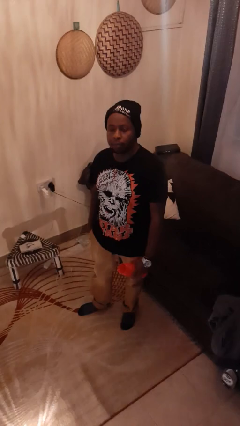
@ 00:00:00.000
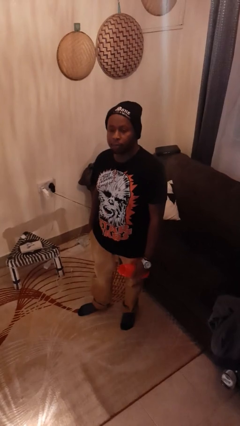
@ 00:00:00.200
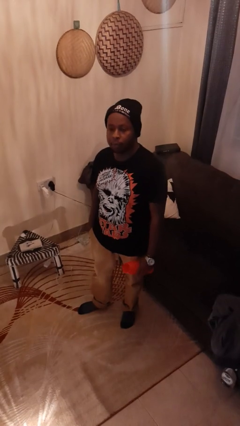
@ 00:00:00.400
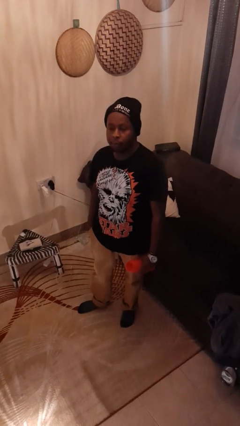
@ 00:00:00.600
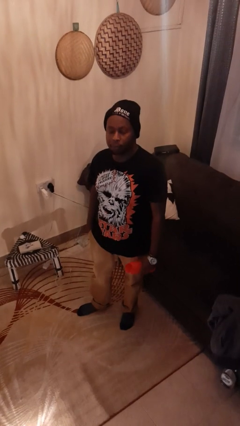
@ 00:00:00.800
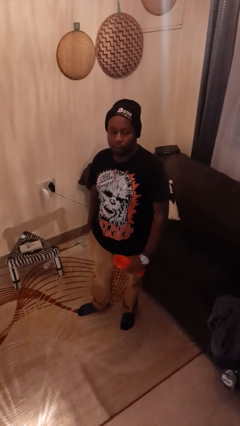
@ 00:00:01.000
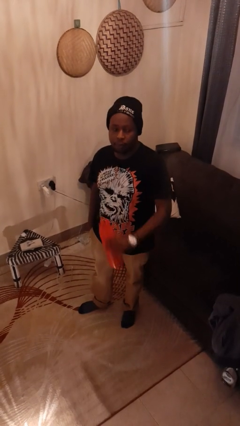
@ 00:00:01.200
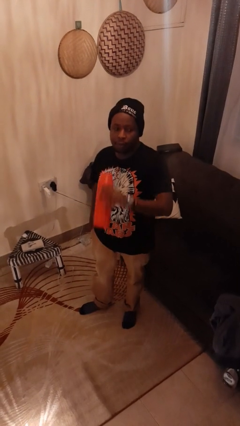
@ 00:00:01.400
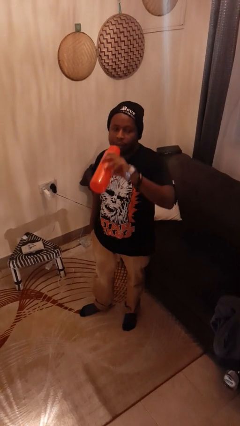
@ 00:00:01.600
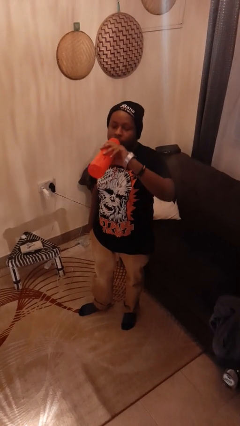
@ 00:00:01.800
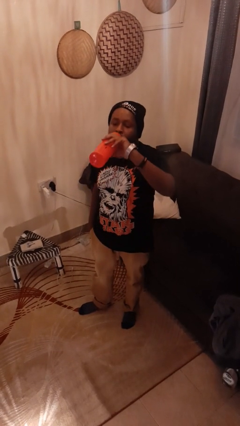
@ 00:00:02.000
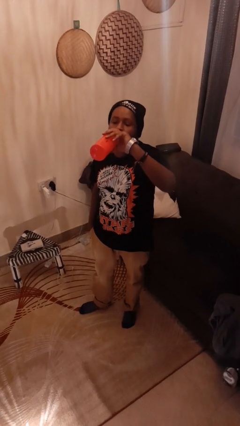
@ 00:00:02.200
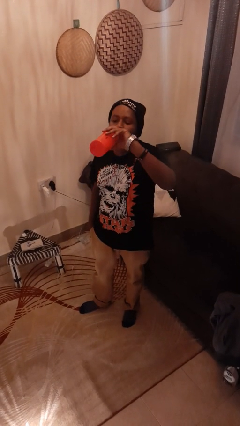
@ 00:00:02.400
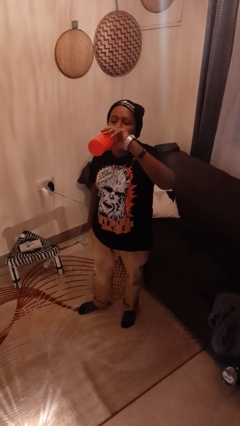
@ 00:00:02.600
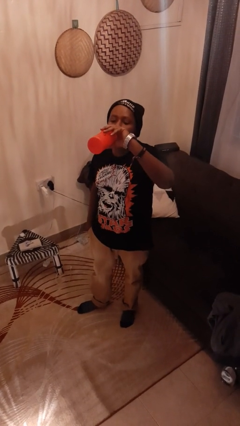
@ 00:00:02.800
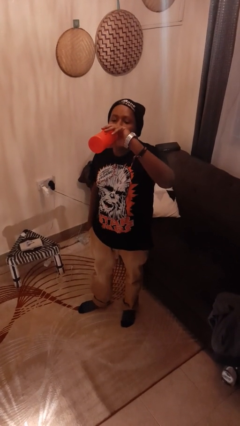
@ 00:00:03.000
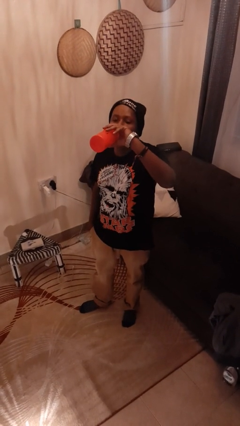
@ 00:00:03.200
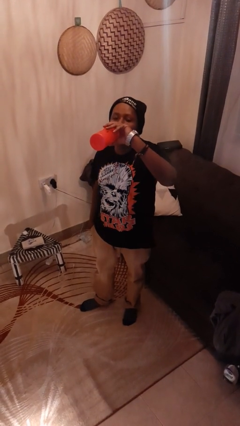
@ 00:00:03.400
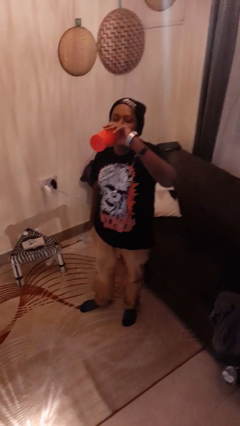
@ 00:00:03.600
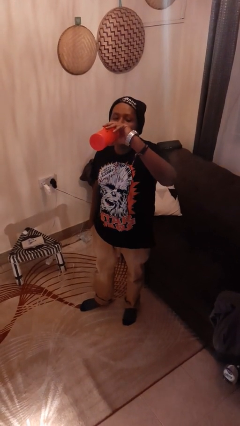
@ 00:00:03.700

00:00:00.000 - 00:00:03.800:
person drinks from bottle

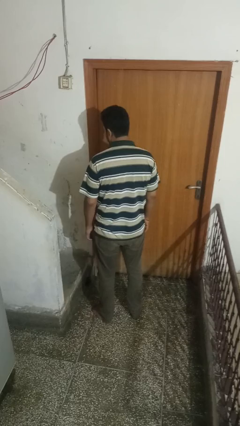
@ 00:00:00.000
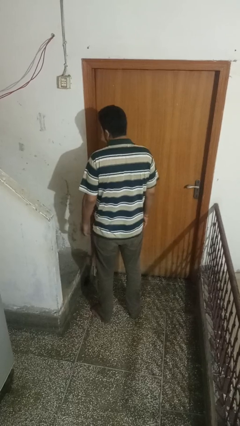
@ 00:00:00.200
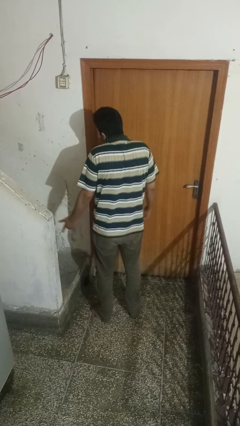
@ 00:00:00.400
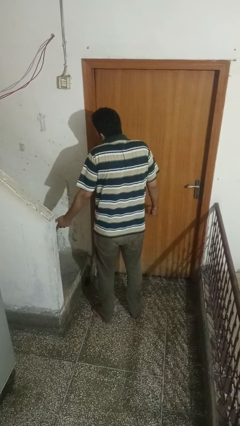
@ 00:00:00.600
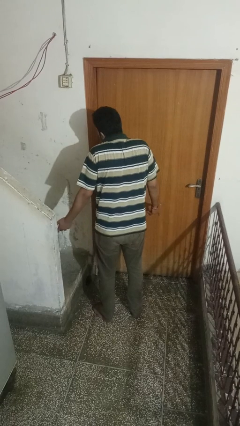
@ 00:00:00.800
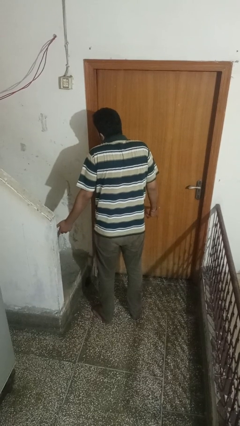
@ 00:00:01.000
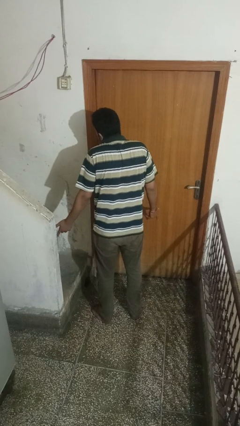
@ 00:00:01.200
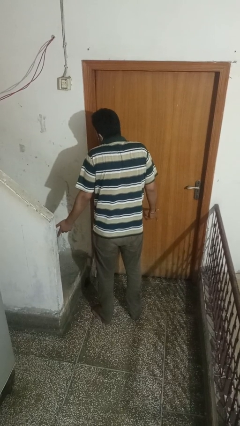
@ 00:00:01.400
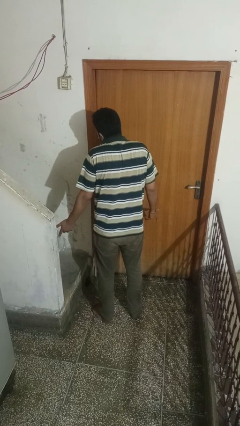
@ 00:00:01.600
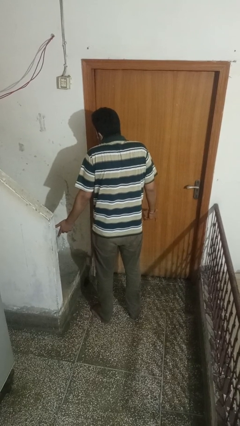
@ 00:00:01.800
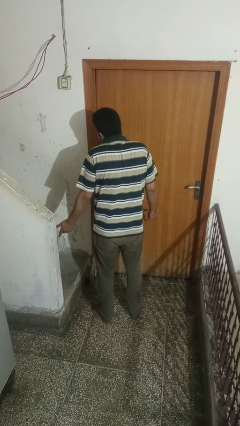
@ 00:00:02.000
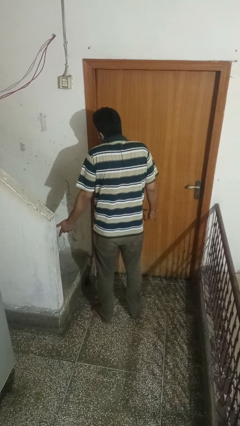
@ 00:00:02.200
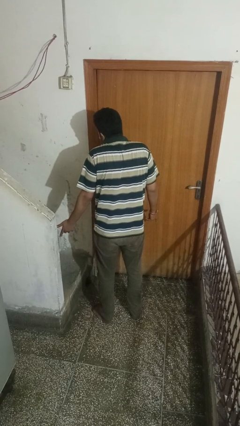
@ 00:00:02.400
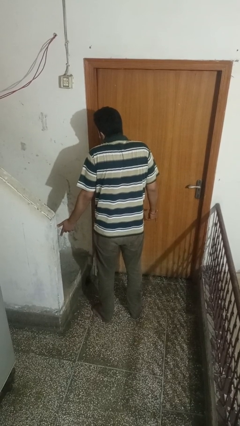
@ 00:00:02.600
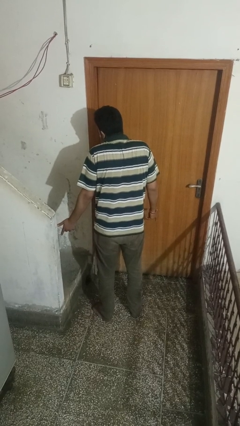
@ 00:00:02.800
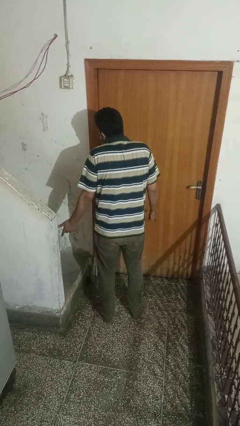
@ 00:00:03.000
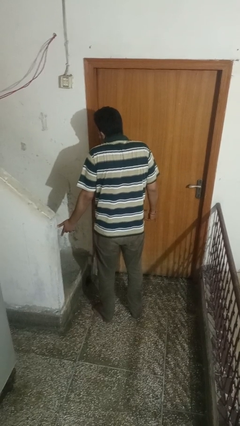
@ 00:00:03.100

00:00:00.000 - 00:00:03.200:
person shrugs

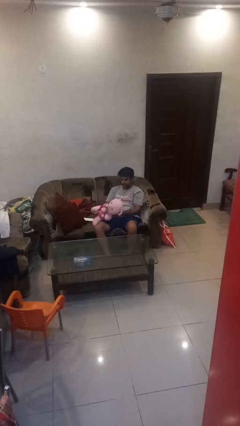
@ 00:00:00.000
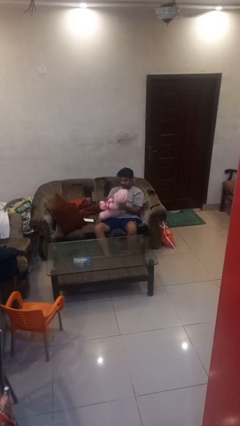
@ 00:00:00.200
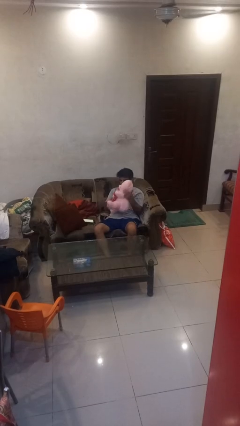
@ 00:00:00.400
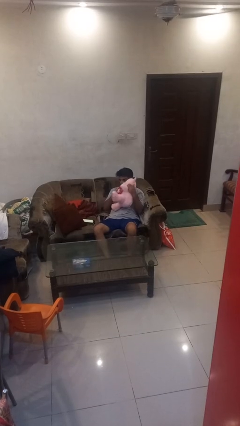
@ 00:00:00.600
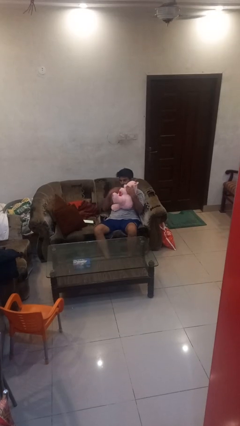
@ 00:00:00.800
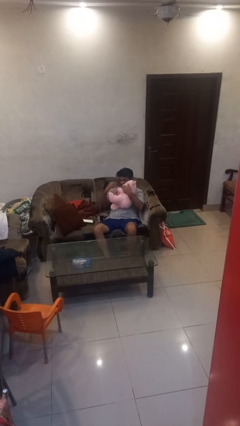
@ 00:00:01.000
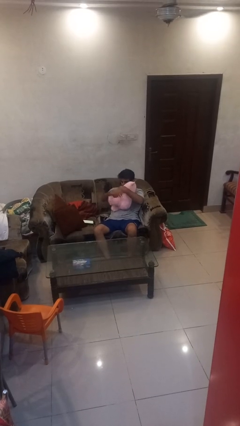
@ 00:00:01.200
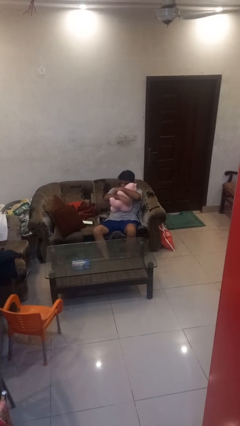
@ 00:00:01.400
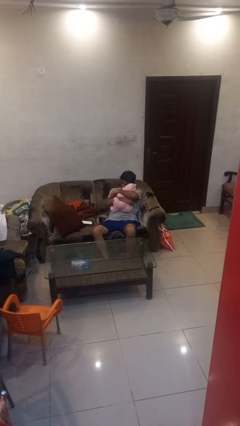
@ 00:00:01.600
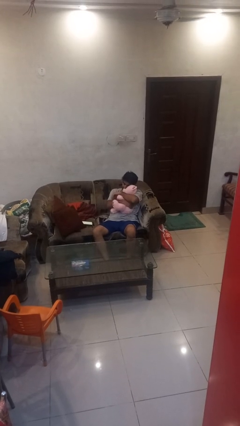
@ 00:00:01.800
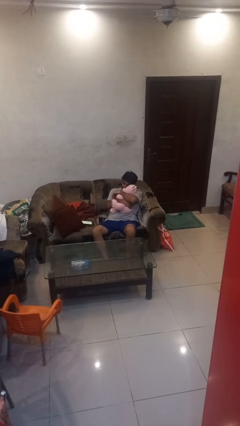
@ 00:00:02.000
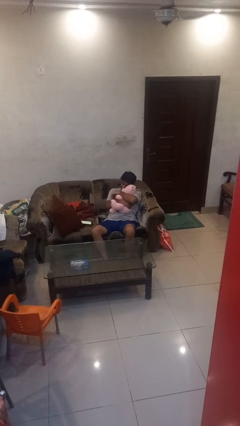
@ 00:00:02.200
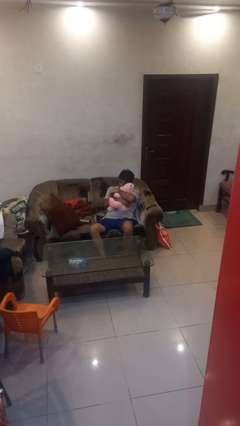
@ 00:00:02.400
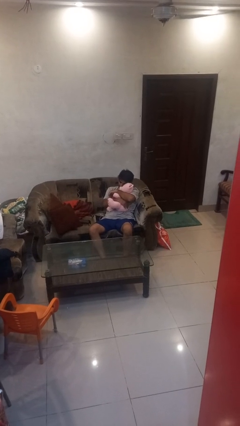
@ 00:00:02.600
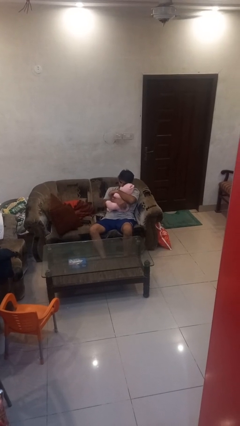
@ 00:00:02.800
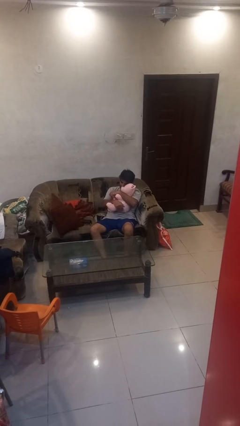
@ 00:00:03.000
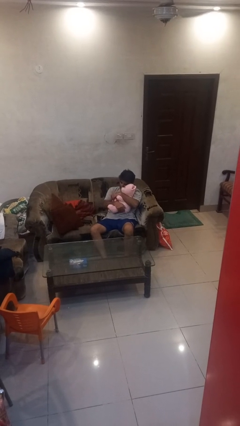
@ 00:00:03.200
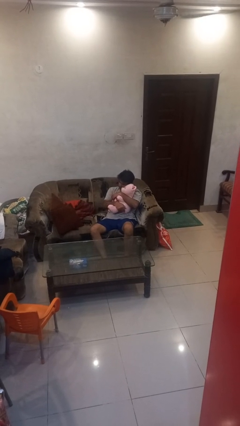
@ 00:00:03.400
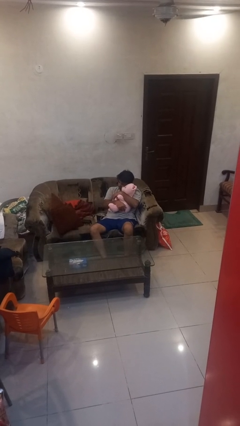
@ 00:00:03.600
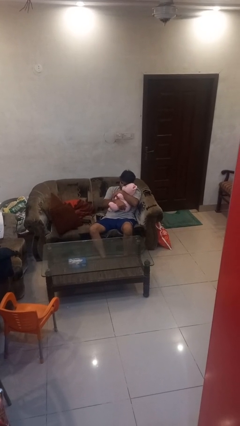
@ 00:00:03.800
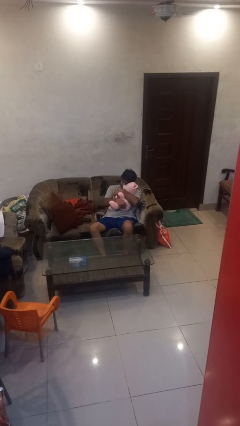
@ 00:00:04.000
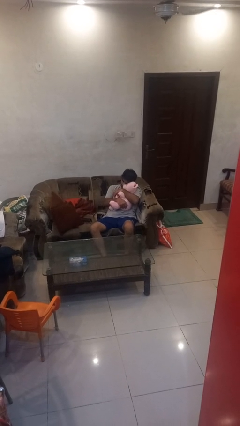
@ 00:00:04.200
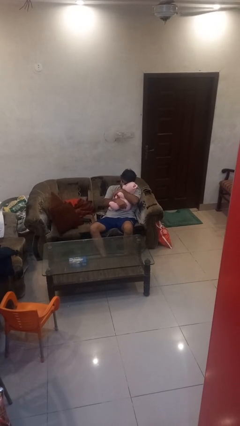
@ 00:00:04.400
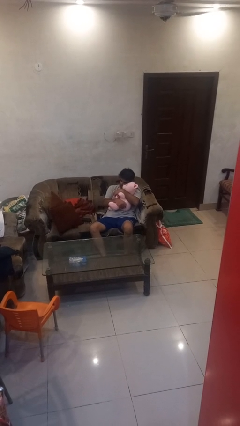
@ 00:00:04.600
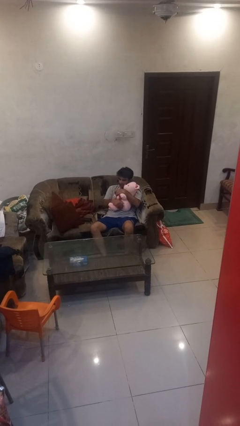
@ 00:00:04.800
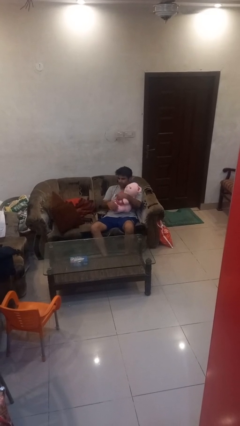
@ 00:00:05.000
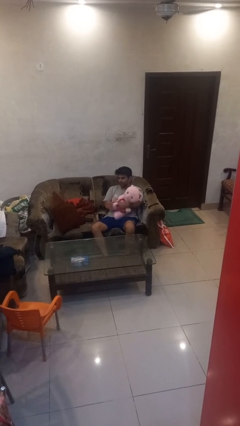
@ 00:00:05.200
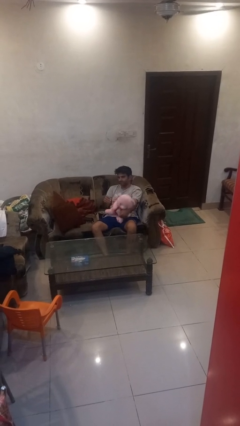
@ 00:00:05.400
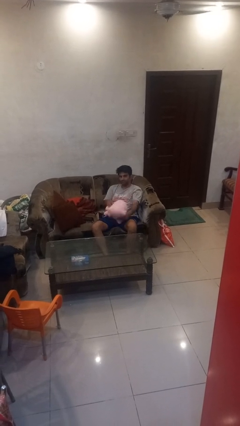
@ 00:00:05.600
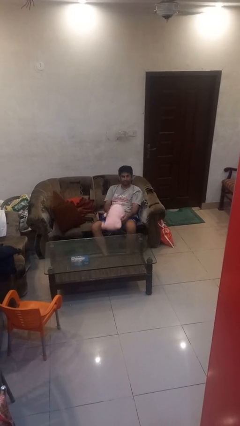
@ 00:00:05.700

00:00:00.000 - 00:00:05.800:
person hugs stuffed animal

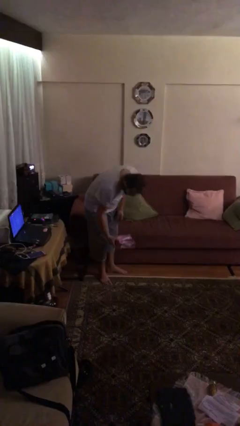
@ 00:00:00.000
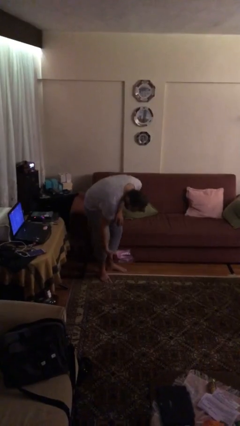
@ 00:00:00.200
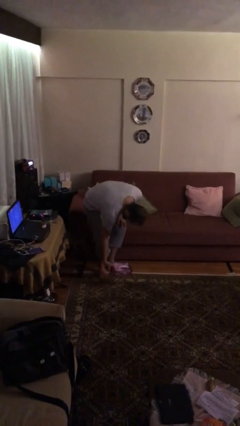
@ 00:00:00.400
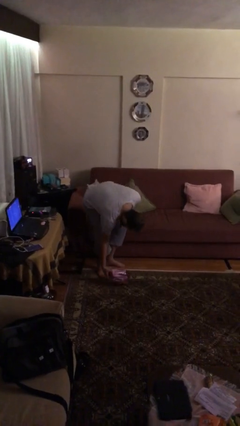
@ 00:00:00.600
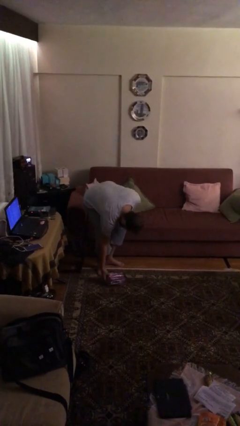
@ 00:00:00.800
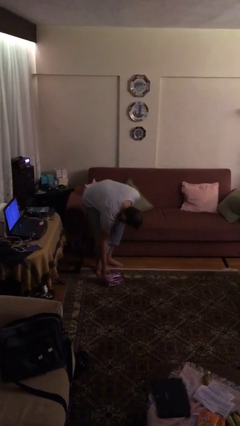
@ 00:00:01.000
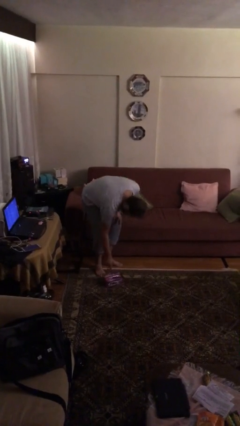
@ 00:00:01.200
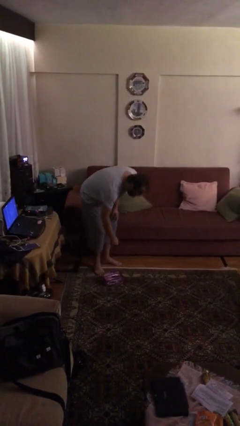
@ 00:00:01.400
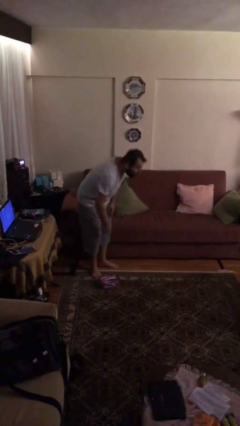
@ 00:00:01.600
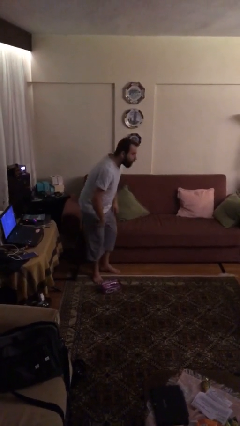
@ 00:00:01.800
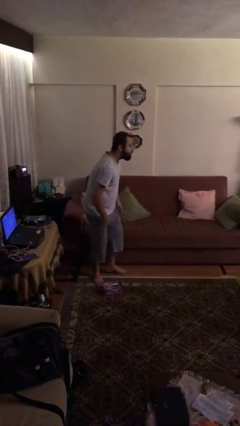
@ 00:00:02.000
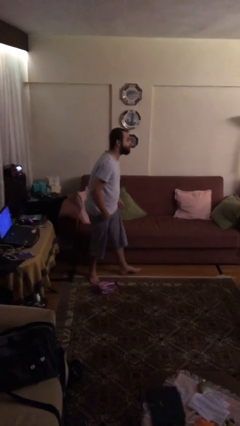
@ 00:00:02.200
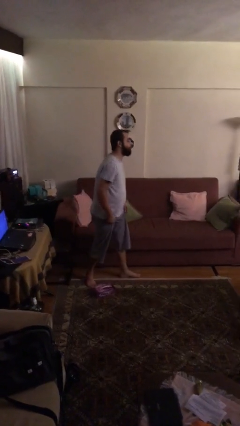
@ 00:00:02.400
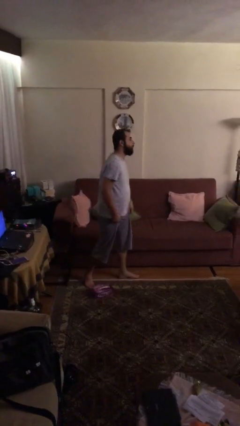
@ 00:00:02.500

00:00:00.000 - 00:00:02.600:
person puts down object on floor

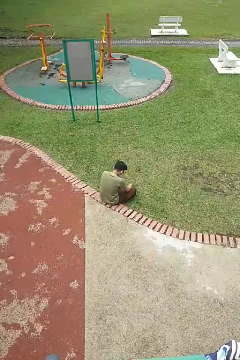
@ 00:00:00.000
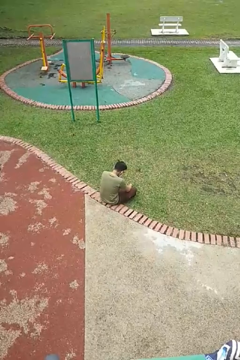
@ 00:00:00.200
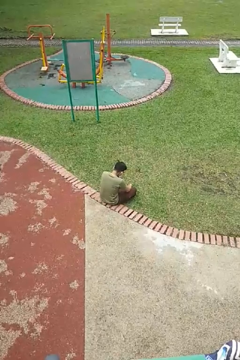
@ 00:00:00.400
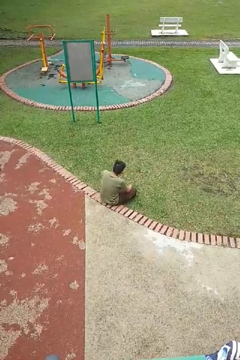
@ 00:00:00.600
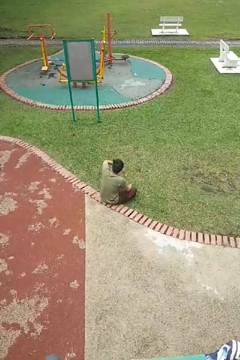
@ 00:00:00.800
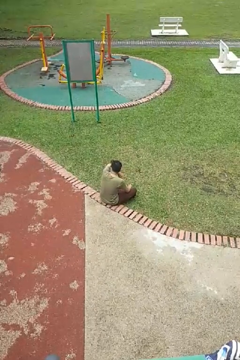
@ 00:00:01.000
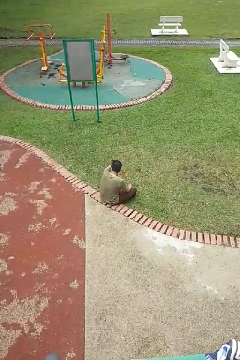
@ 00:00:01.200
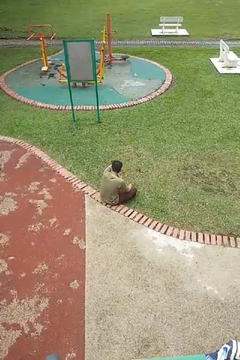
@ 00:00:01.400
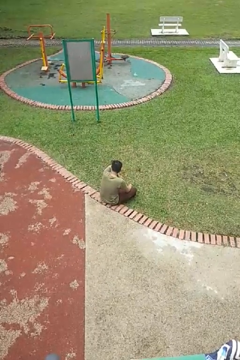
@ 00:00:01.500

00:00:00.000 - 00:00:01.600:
person sneezes into arm

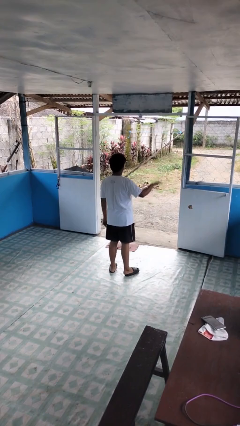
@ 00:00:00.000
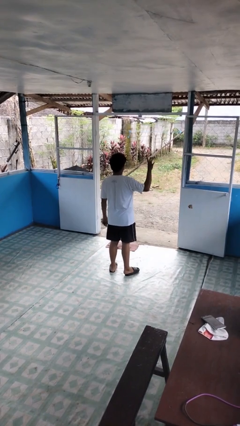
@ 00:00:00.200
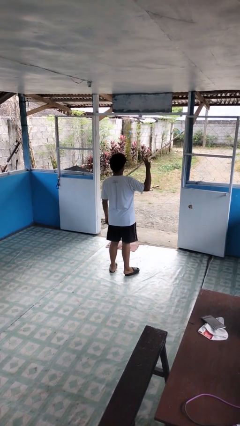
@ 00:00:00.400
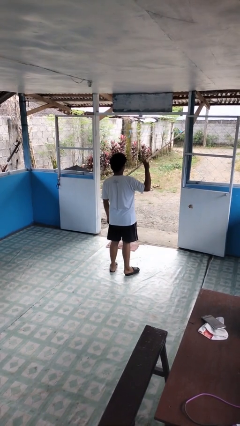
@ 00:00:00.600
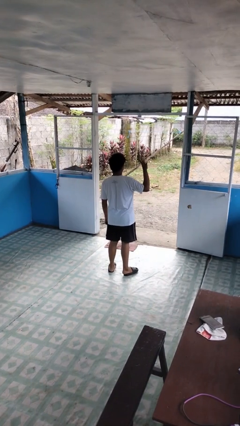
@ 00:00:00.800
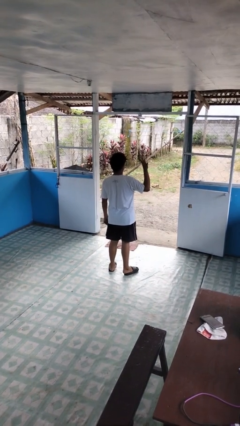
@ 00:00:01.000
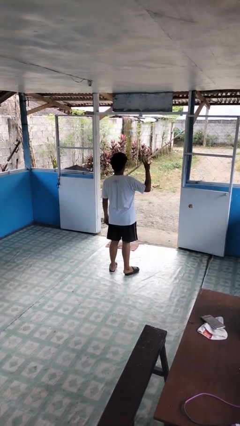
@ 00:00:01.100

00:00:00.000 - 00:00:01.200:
person gestures number four
